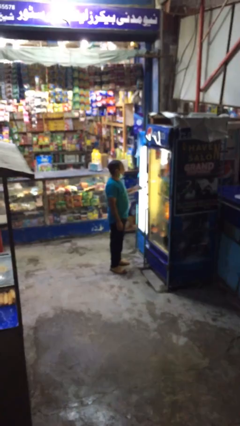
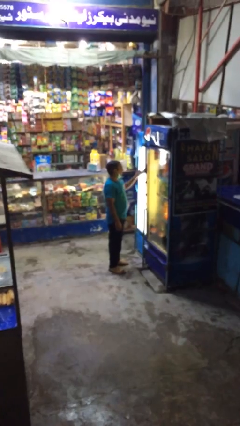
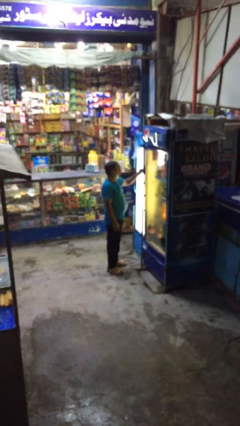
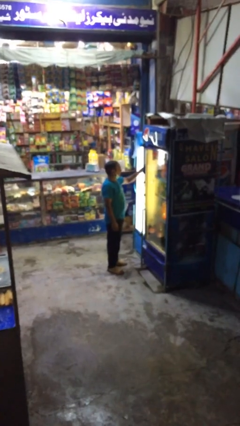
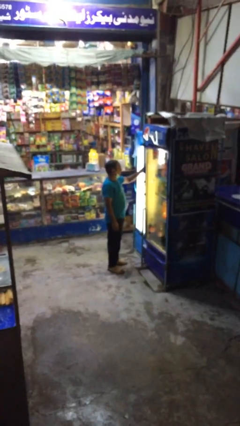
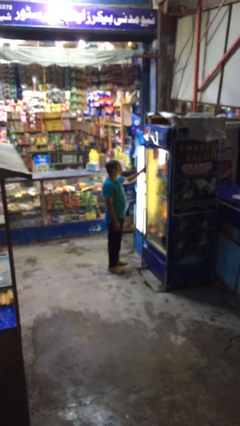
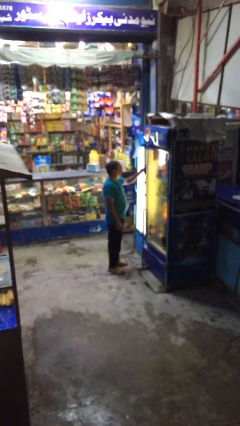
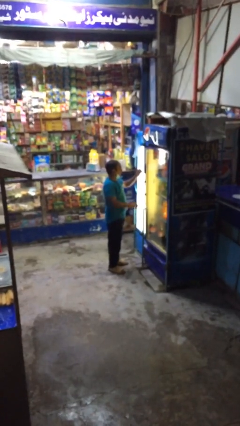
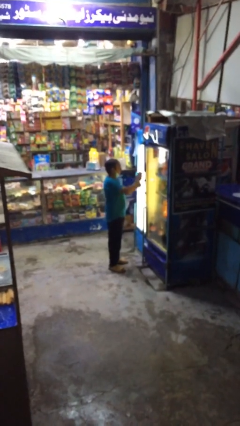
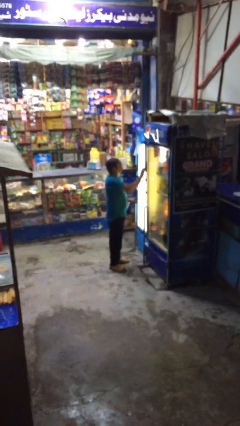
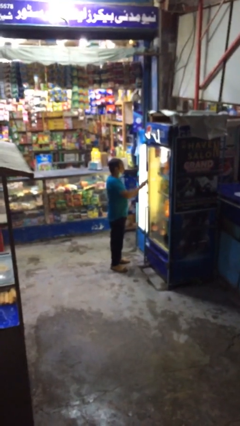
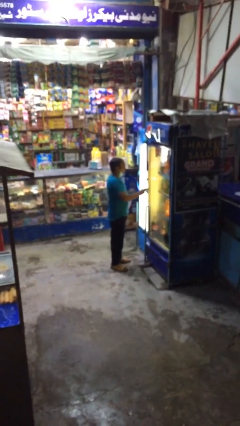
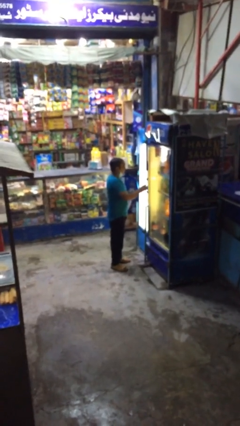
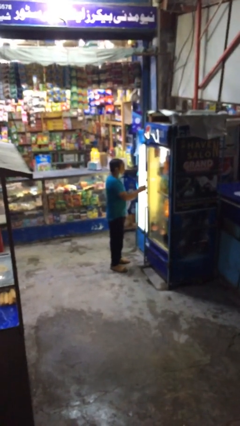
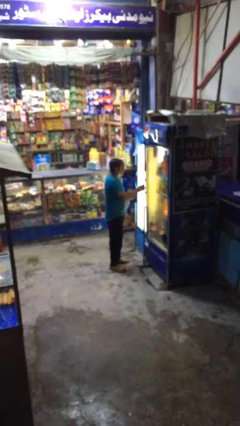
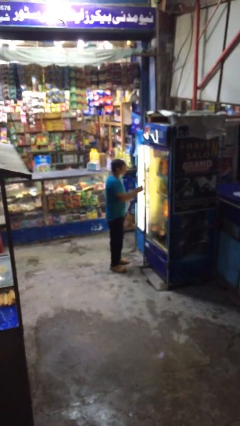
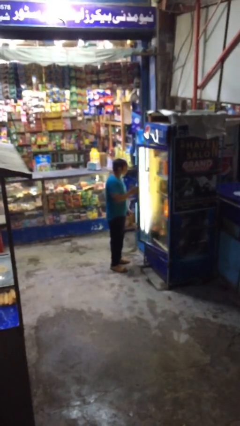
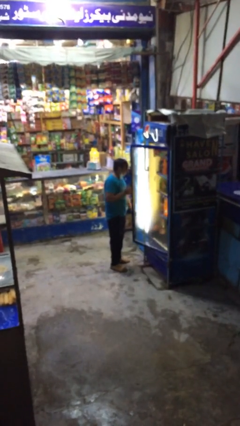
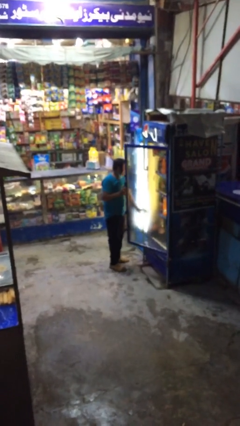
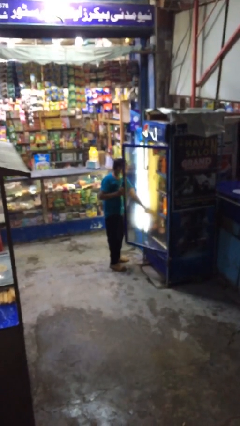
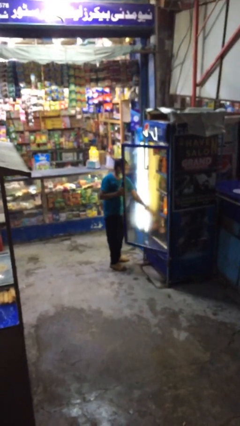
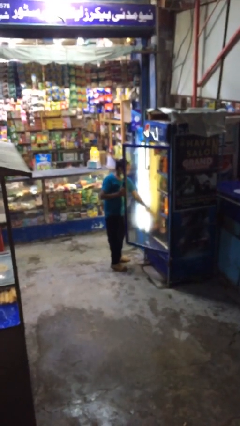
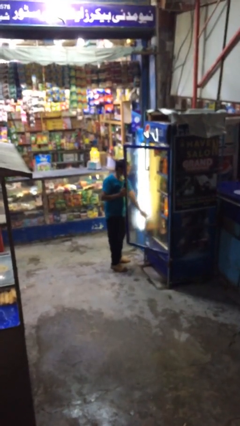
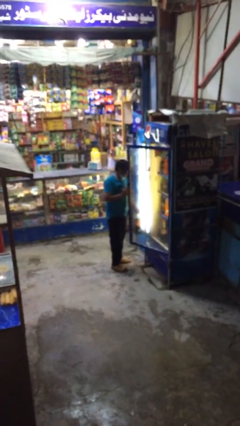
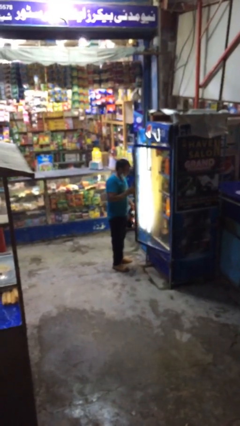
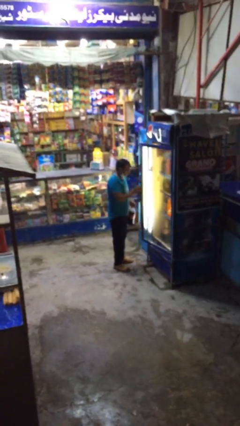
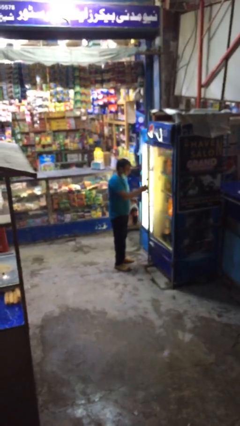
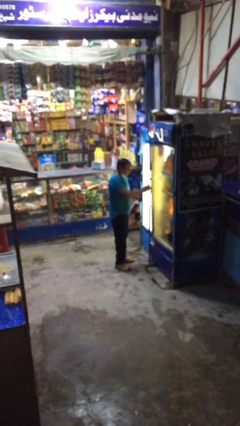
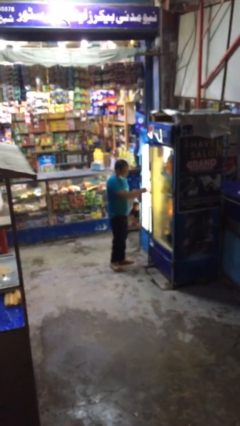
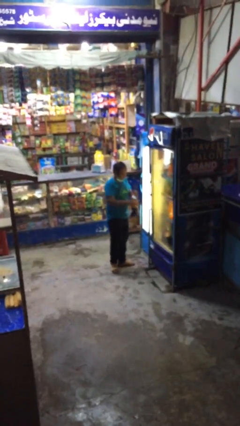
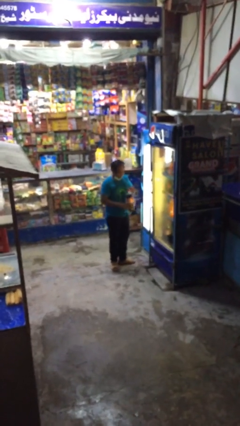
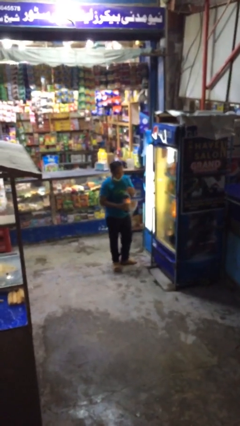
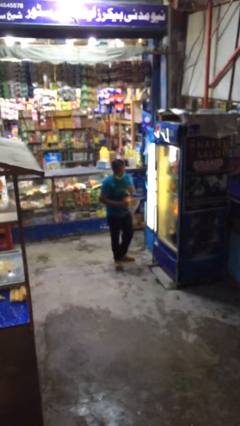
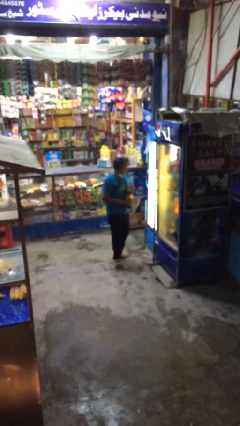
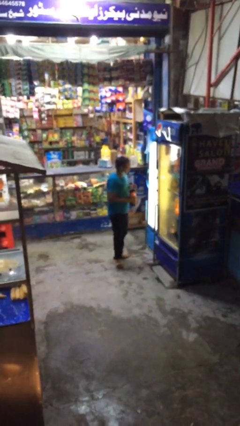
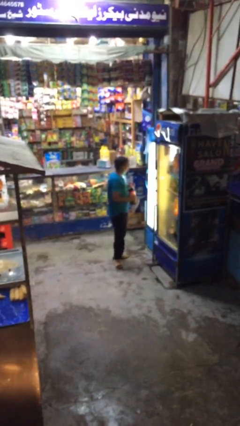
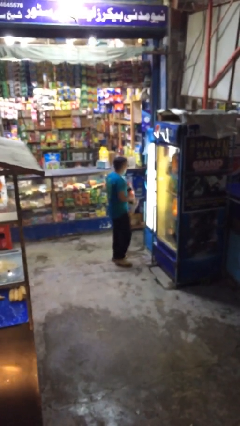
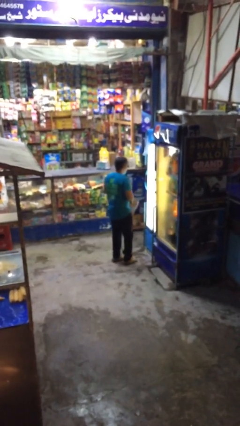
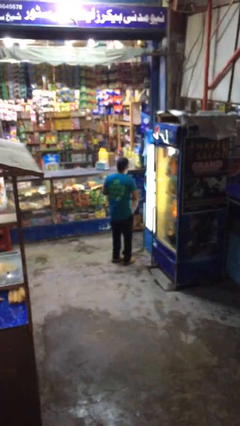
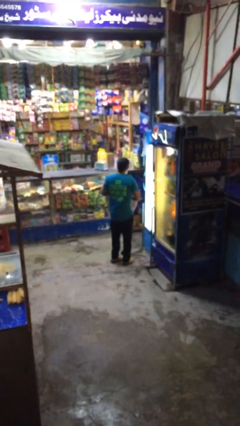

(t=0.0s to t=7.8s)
person purchases from machine

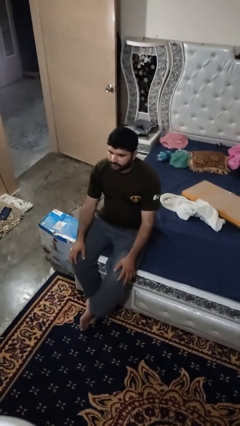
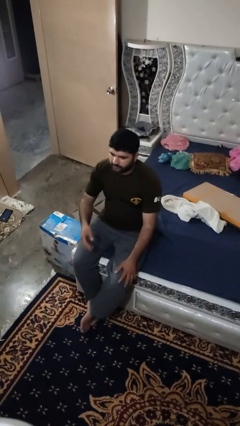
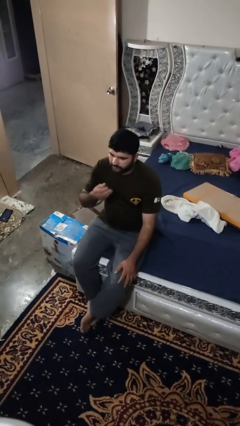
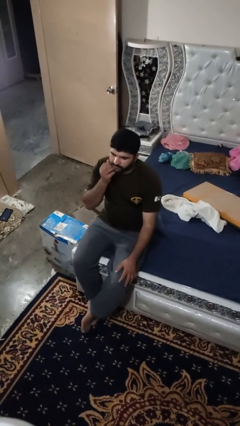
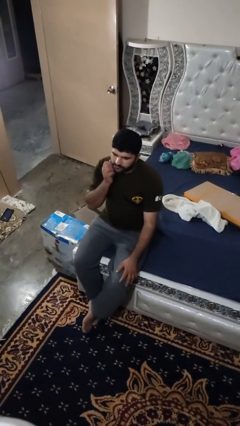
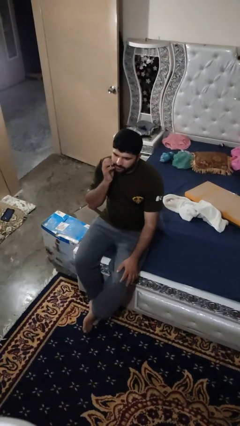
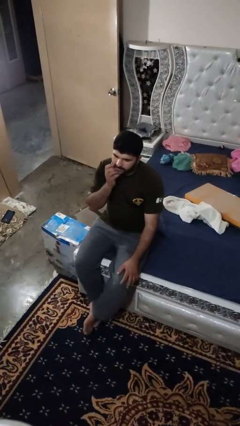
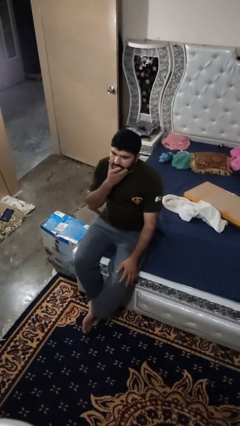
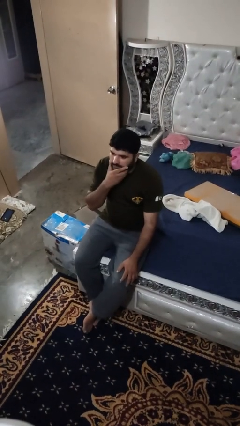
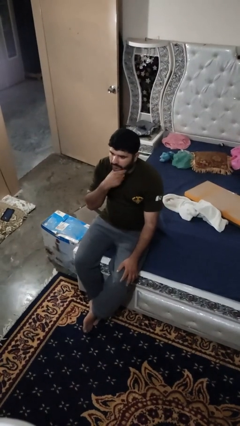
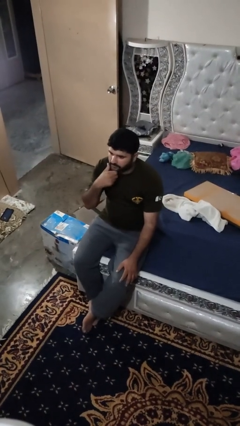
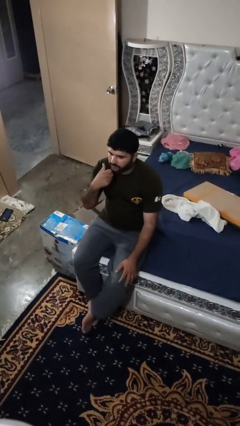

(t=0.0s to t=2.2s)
person strokes chin

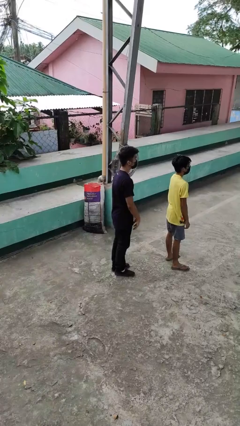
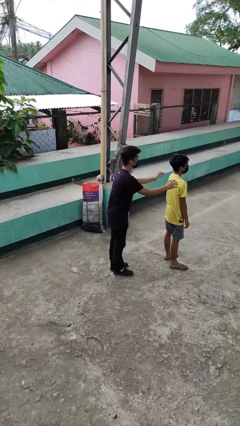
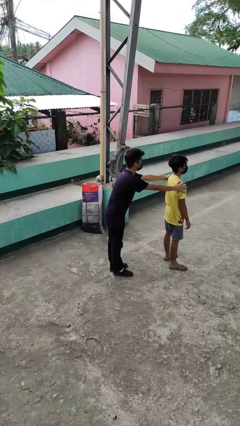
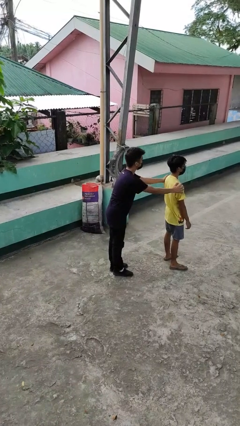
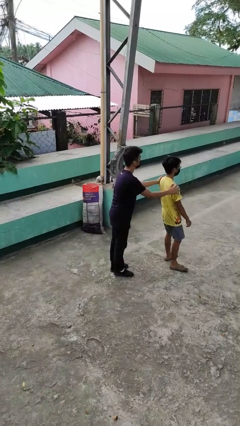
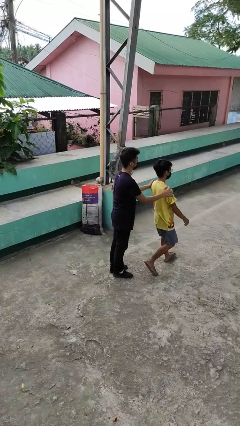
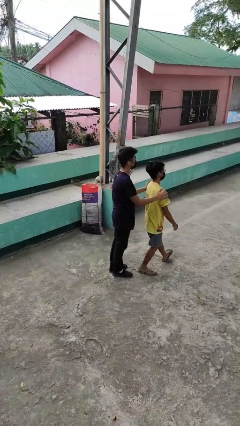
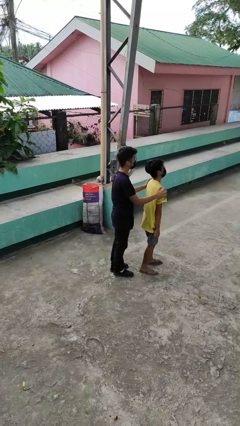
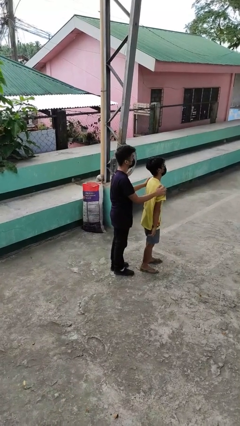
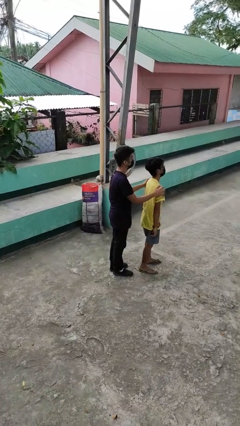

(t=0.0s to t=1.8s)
person grabs person by shoulder

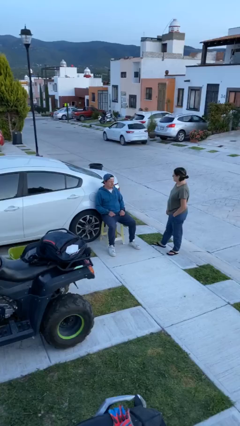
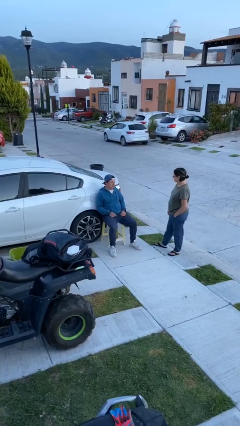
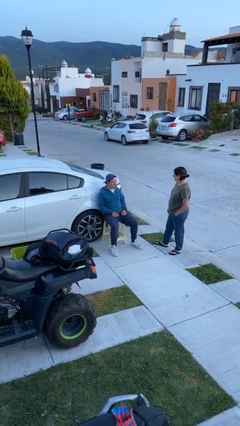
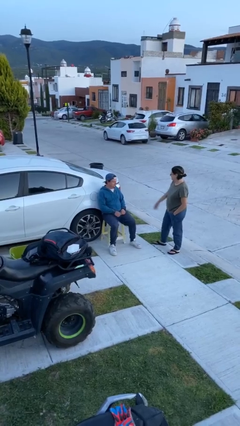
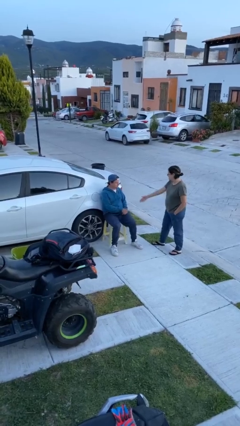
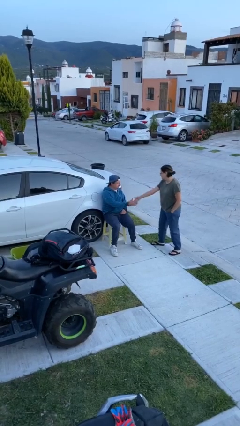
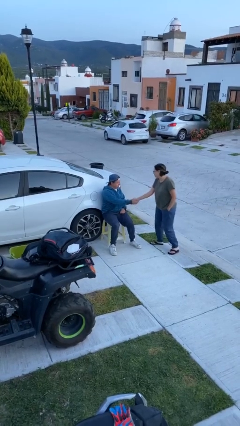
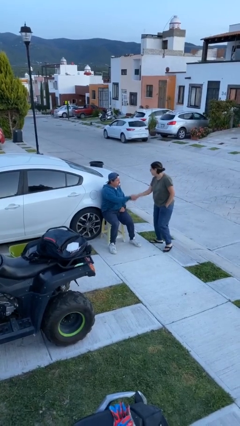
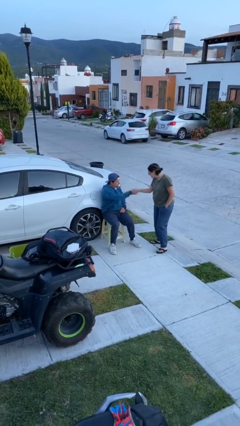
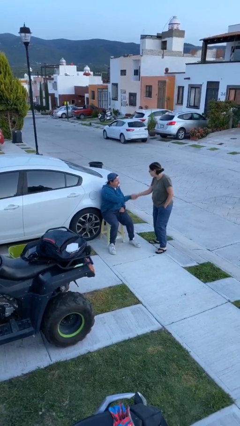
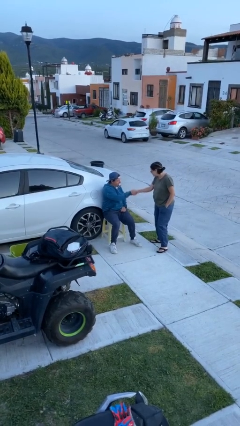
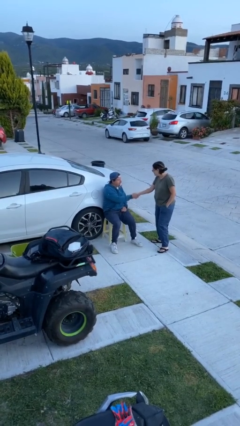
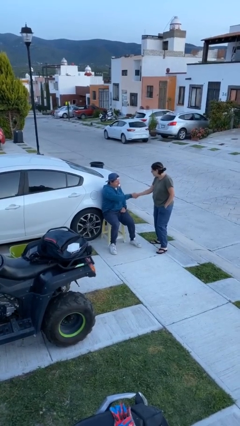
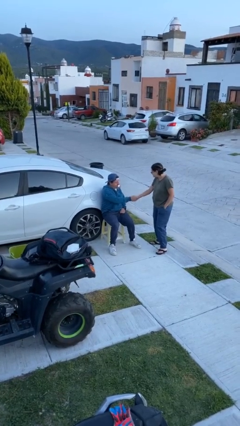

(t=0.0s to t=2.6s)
person shakes hand

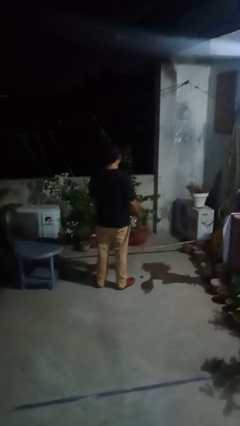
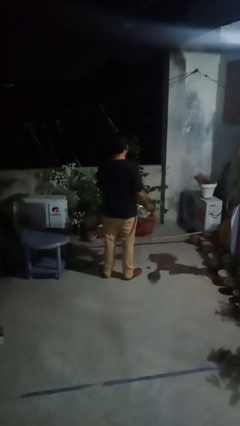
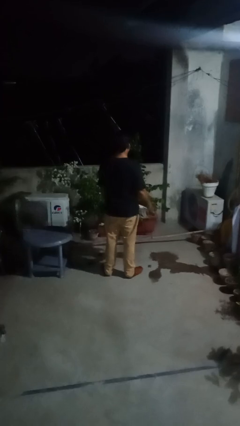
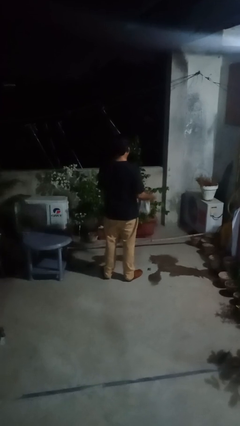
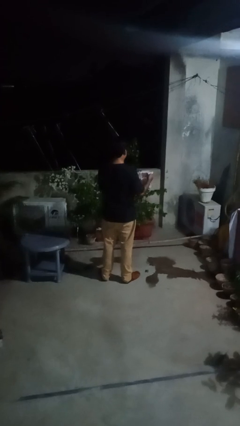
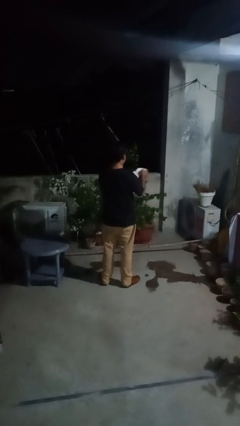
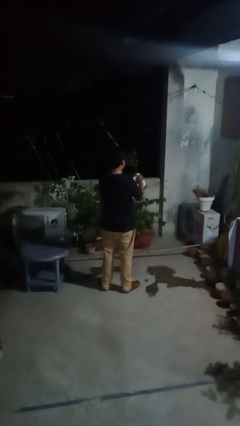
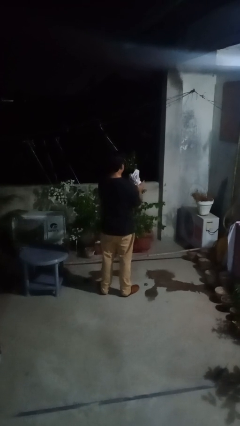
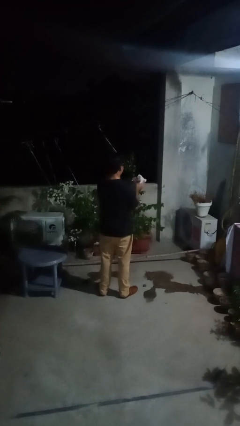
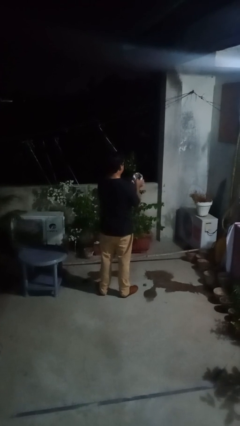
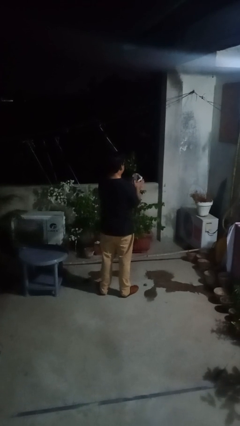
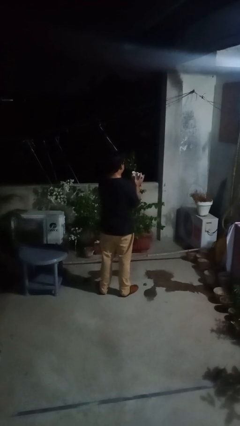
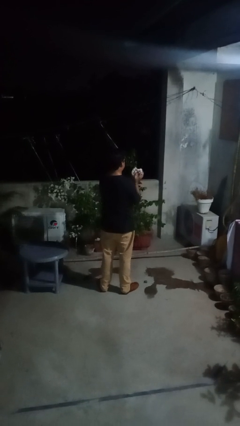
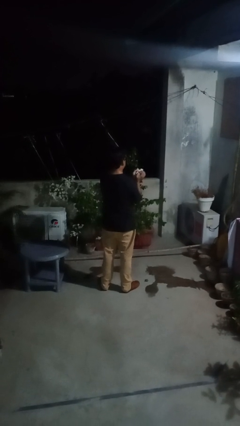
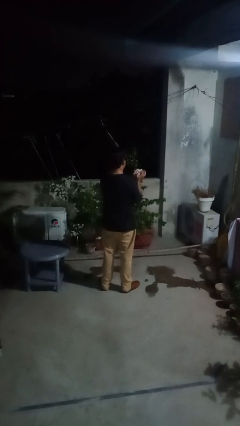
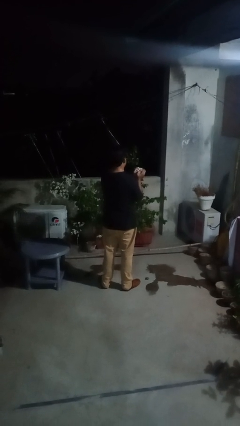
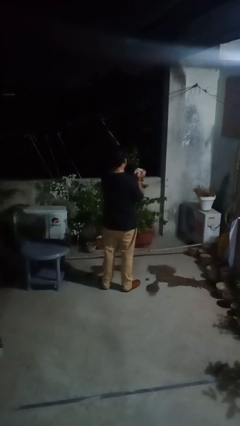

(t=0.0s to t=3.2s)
person crumples paper
